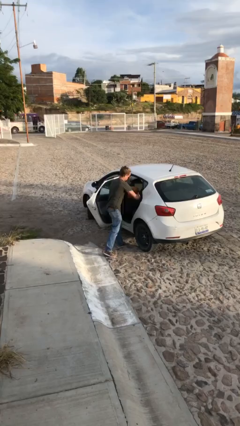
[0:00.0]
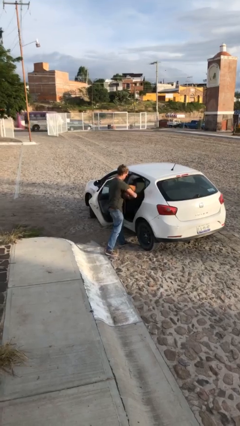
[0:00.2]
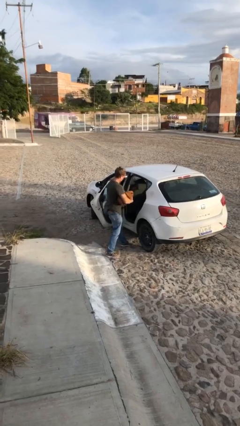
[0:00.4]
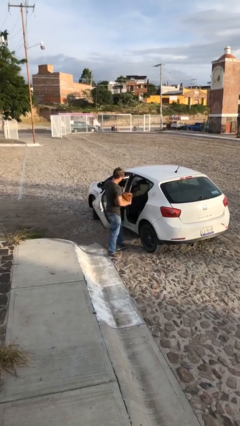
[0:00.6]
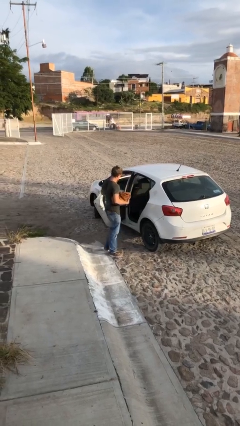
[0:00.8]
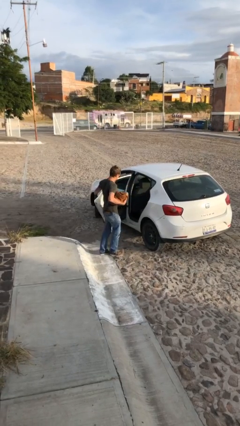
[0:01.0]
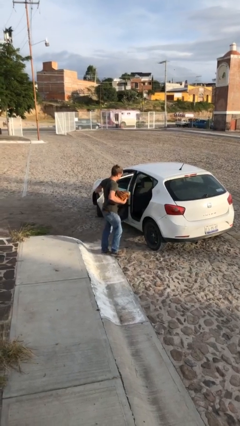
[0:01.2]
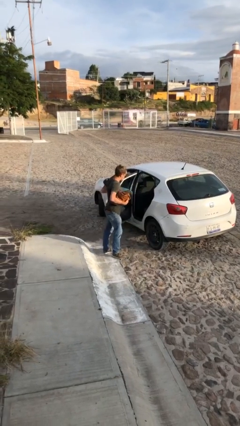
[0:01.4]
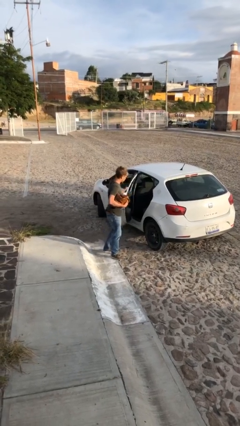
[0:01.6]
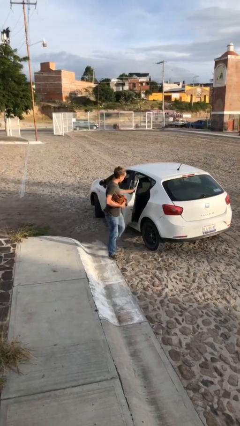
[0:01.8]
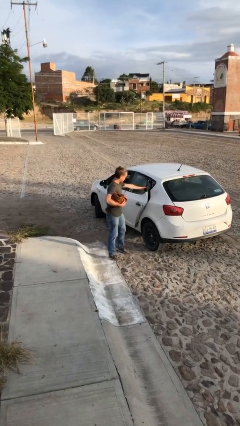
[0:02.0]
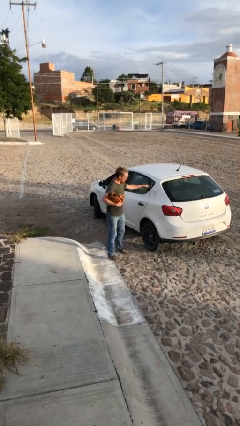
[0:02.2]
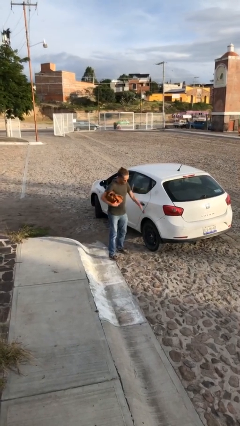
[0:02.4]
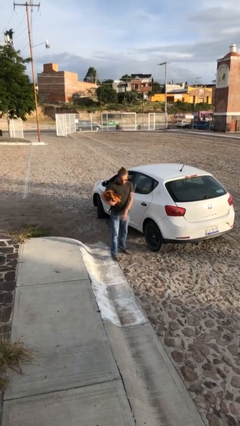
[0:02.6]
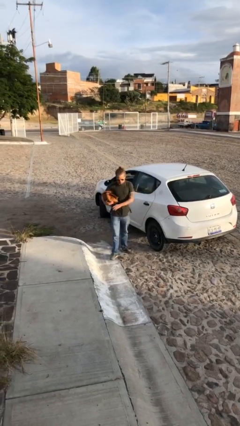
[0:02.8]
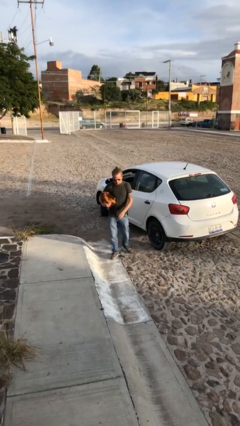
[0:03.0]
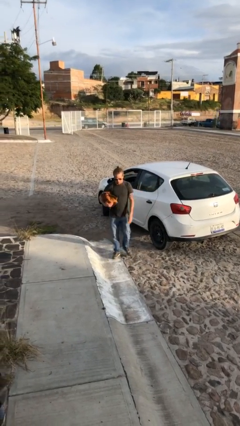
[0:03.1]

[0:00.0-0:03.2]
person closes car door

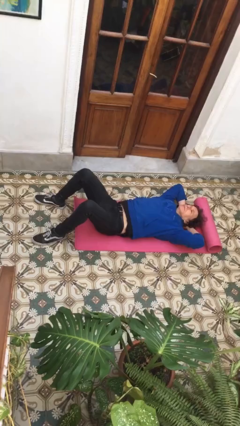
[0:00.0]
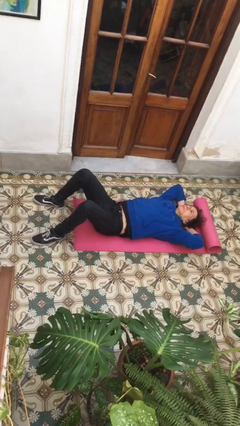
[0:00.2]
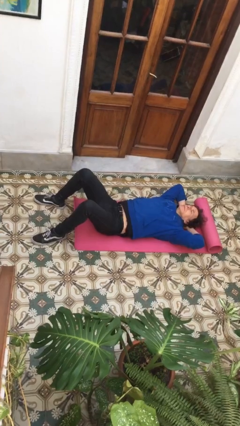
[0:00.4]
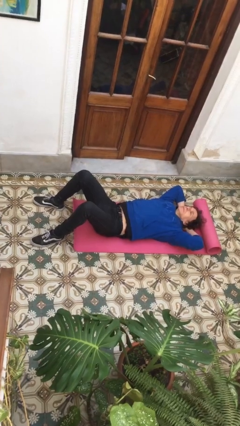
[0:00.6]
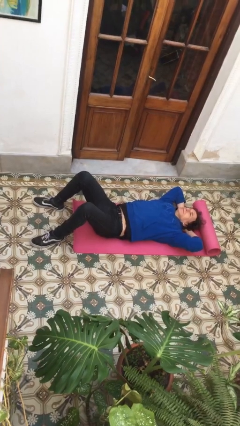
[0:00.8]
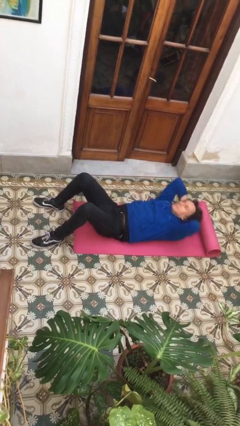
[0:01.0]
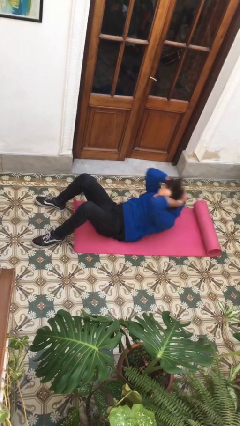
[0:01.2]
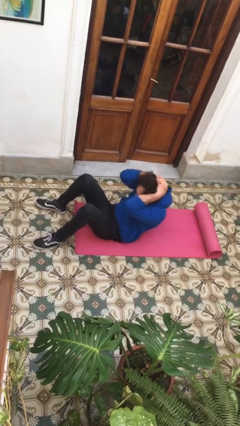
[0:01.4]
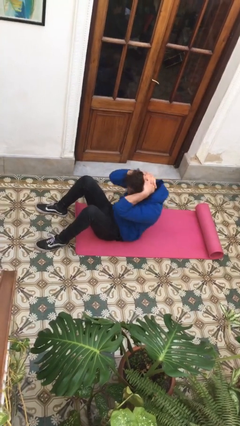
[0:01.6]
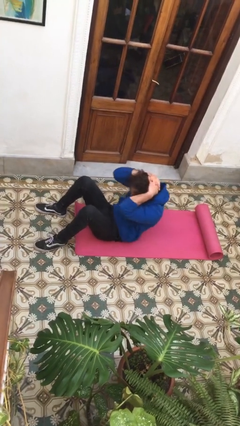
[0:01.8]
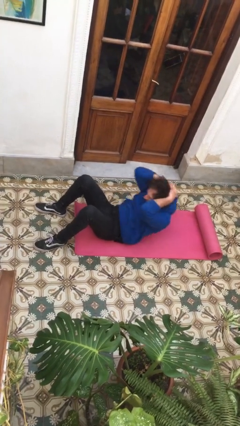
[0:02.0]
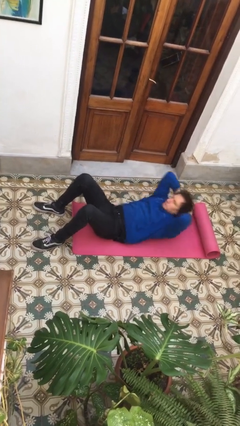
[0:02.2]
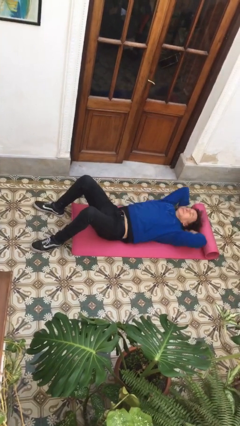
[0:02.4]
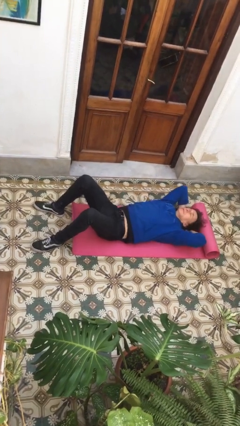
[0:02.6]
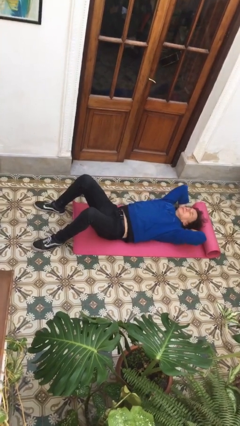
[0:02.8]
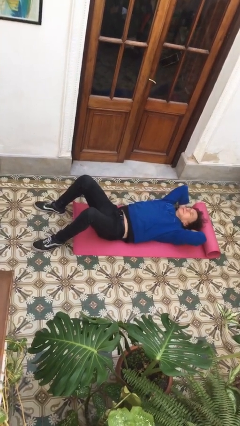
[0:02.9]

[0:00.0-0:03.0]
person exercises with situp

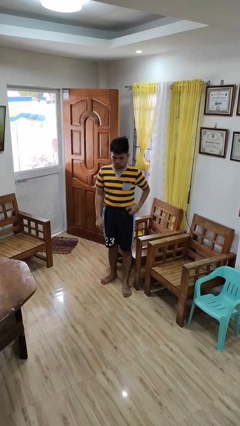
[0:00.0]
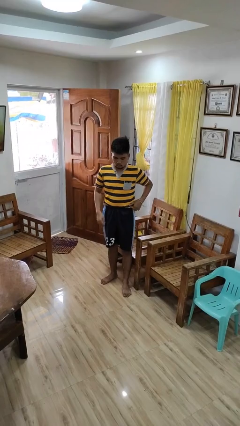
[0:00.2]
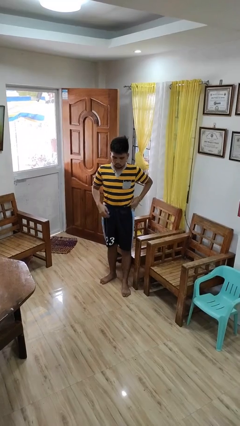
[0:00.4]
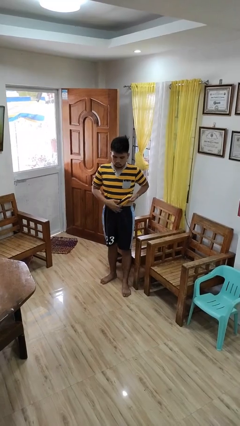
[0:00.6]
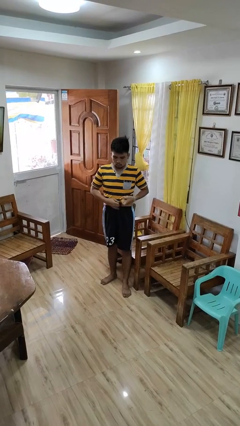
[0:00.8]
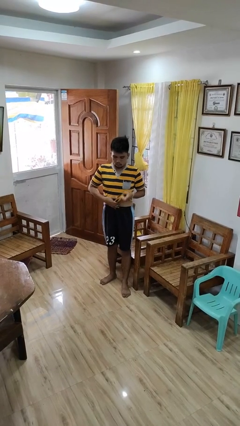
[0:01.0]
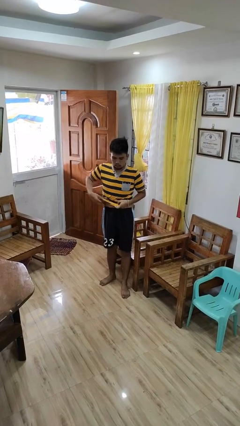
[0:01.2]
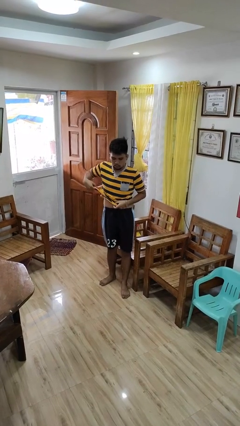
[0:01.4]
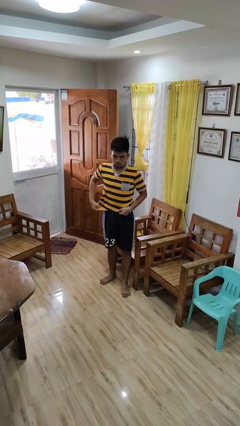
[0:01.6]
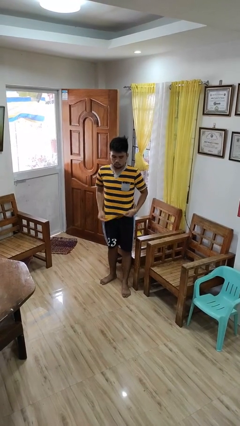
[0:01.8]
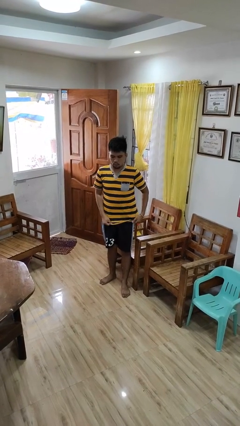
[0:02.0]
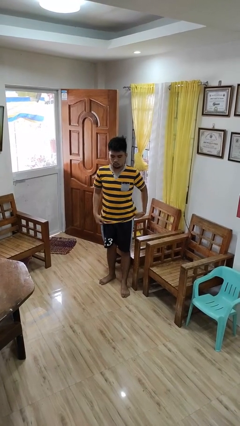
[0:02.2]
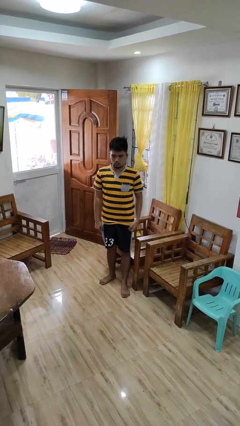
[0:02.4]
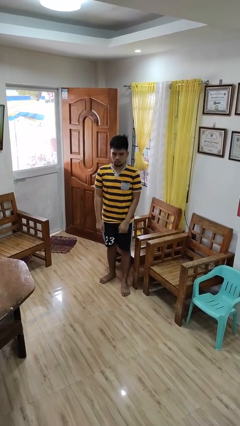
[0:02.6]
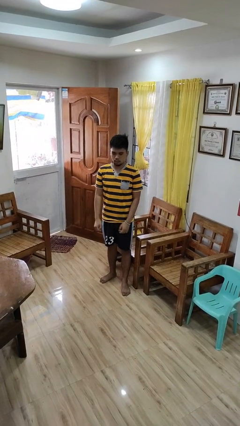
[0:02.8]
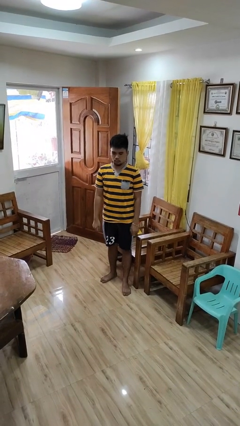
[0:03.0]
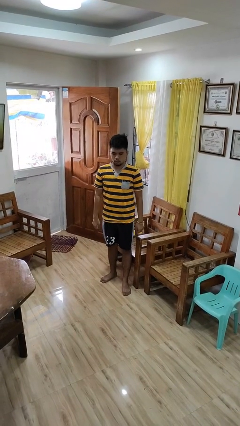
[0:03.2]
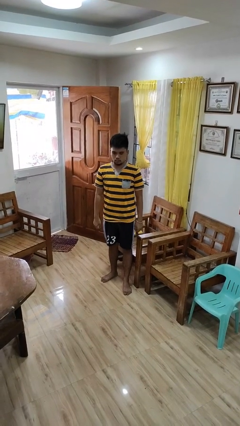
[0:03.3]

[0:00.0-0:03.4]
person untucks shirt

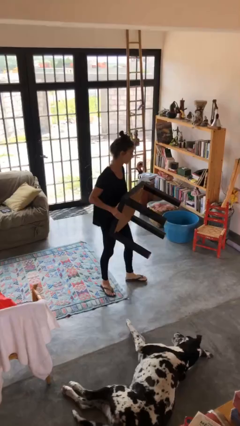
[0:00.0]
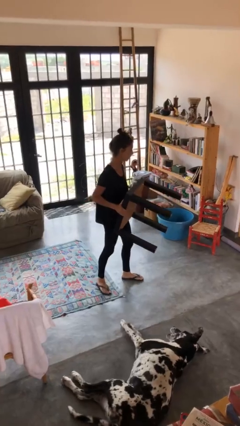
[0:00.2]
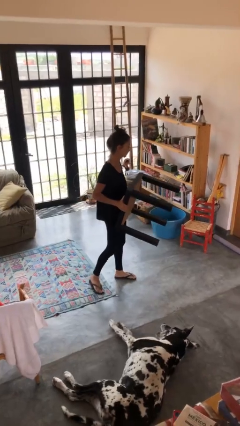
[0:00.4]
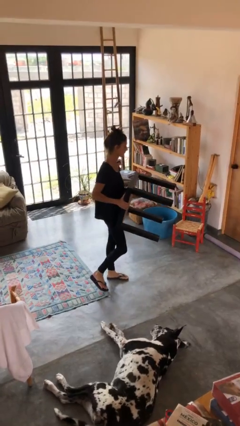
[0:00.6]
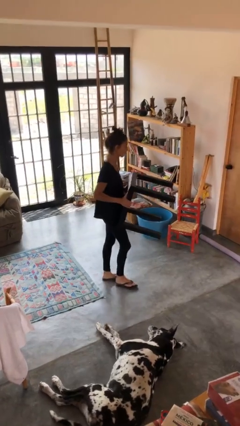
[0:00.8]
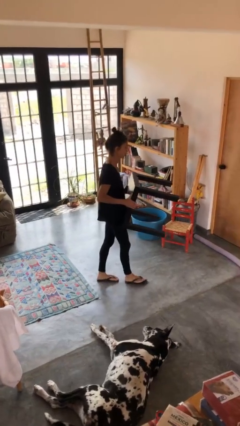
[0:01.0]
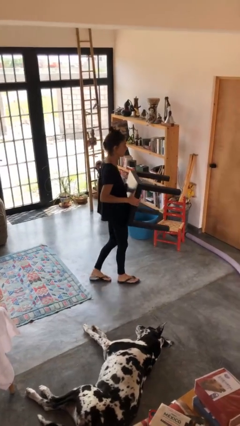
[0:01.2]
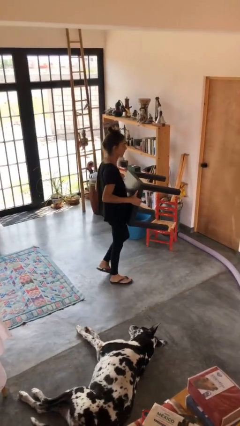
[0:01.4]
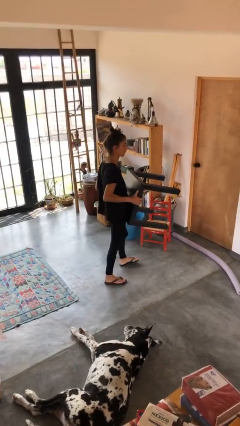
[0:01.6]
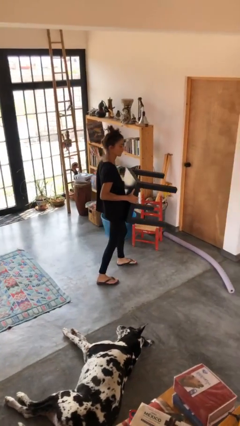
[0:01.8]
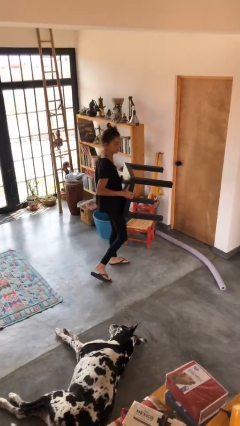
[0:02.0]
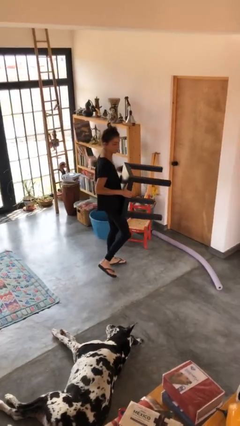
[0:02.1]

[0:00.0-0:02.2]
person carries furniture

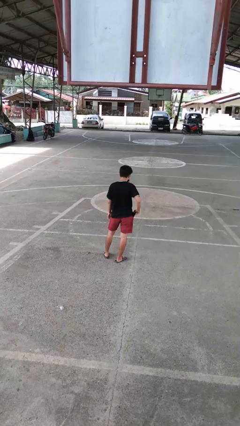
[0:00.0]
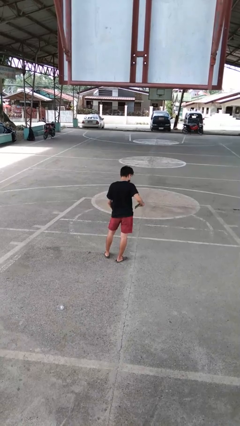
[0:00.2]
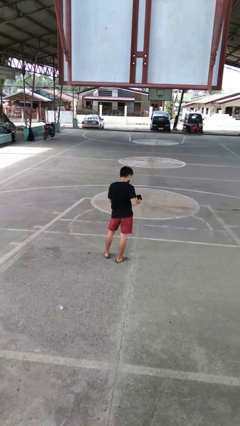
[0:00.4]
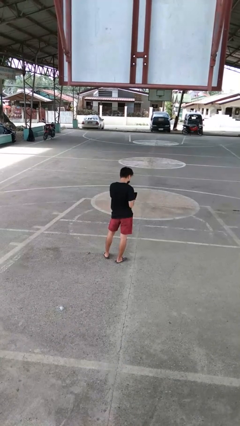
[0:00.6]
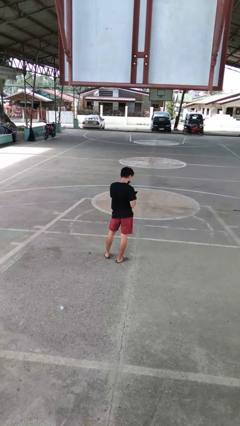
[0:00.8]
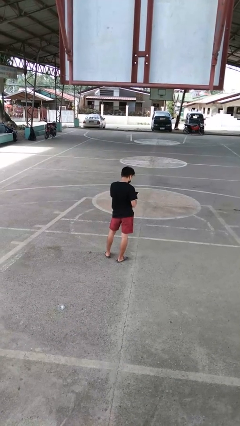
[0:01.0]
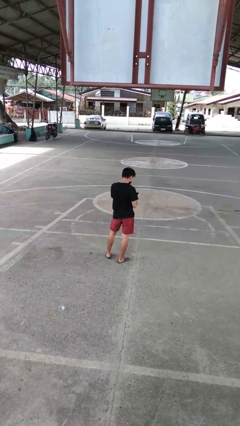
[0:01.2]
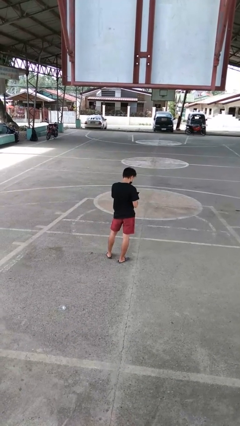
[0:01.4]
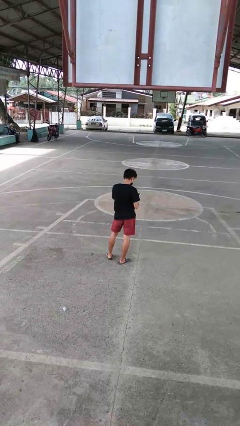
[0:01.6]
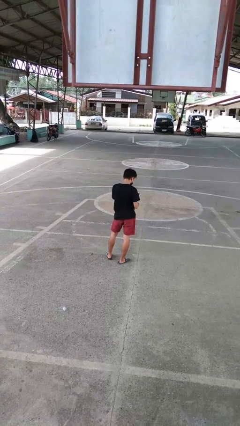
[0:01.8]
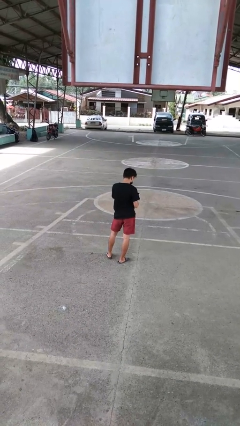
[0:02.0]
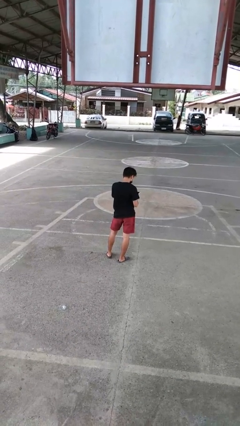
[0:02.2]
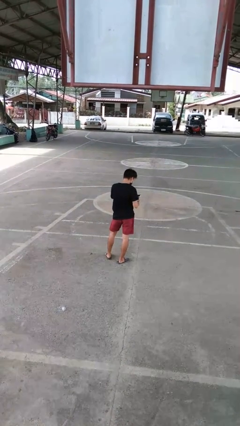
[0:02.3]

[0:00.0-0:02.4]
person takes phone from pocket

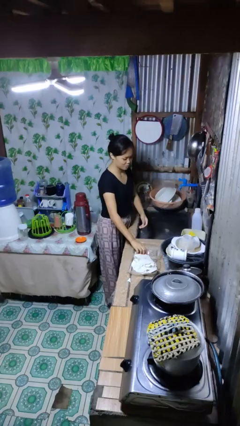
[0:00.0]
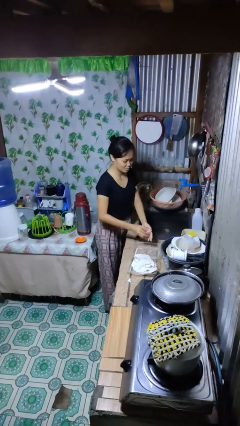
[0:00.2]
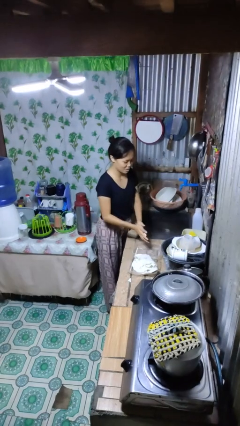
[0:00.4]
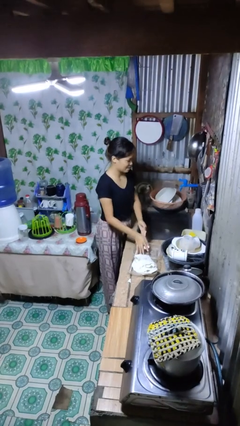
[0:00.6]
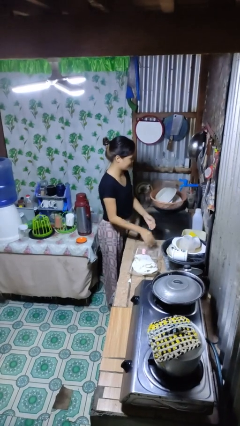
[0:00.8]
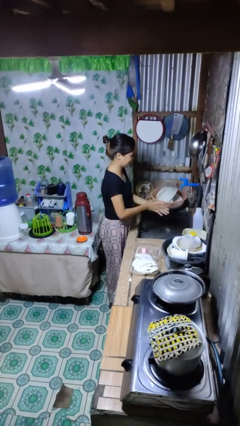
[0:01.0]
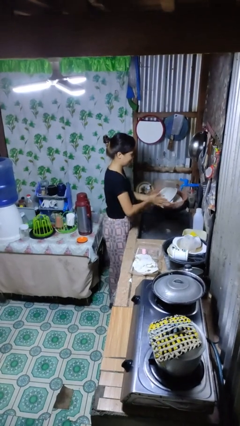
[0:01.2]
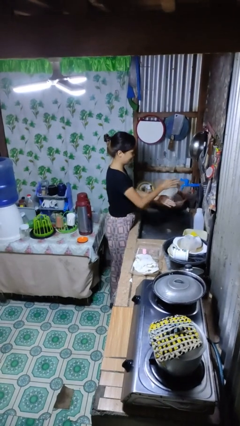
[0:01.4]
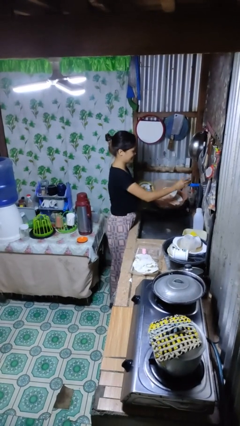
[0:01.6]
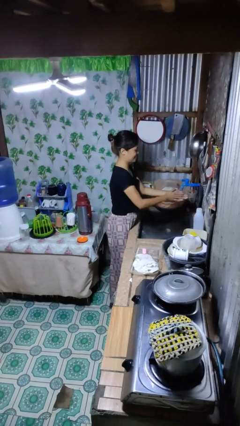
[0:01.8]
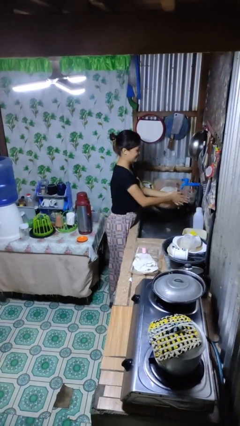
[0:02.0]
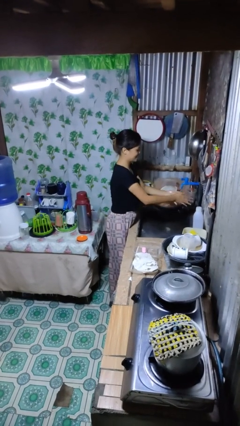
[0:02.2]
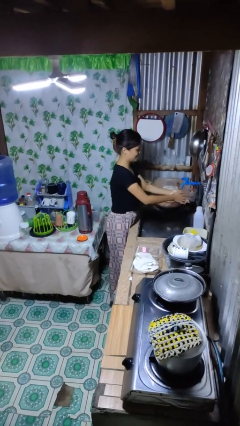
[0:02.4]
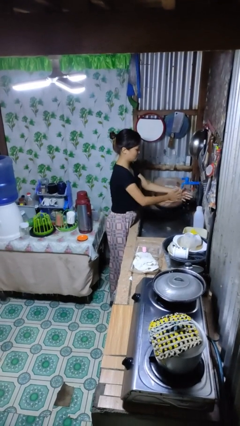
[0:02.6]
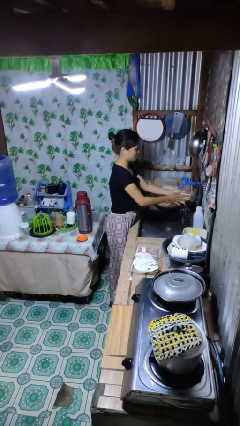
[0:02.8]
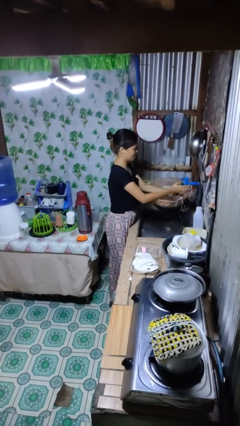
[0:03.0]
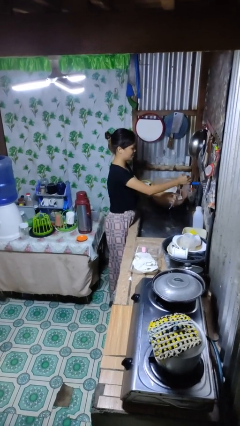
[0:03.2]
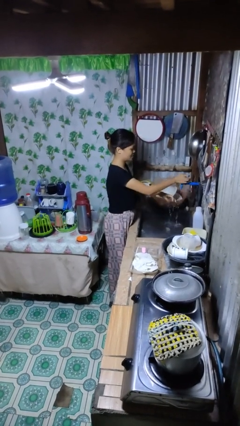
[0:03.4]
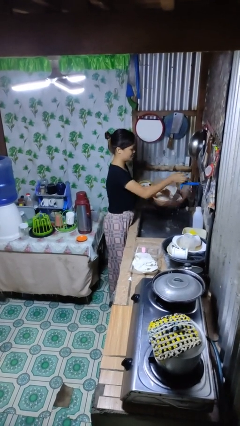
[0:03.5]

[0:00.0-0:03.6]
person washes hands
